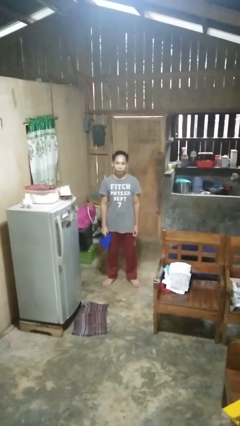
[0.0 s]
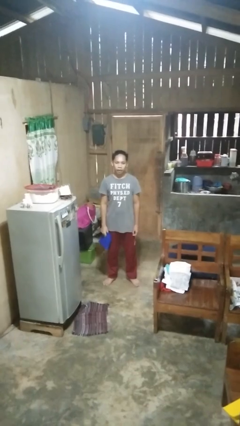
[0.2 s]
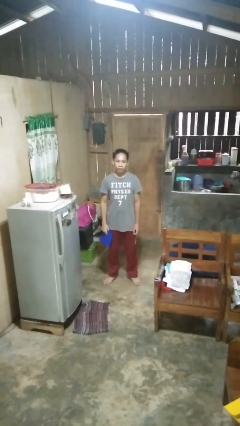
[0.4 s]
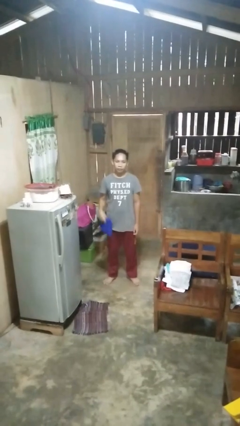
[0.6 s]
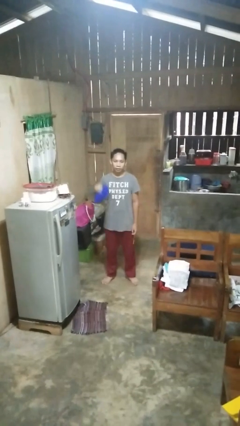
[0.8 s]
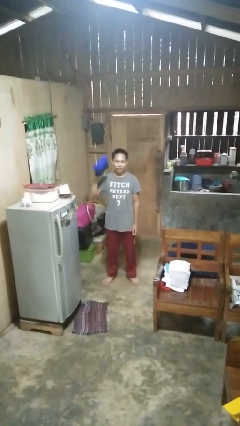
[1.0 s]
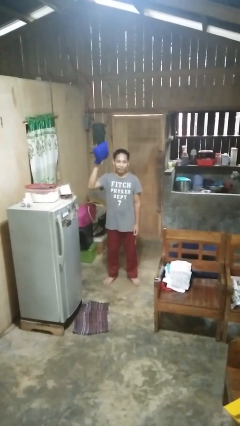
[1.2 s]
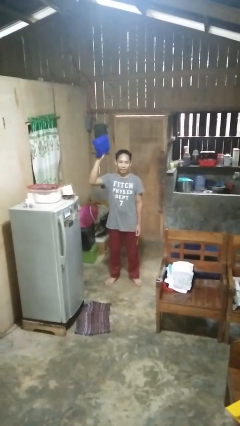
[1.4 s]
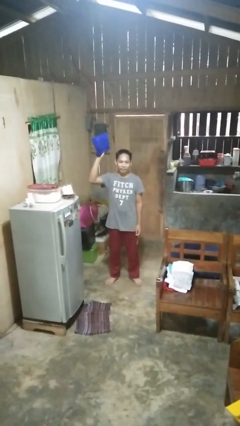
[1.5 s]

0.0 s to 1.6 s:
person holds object above head

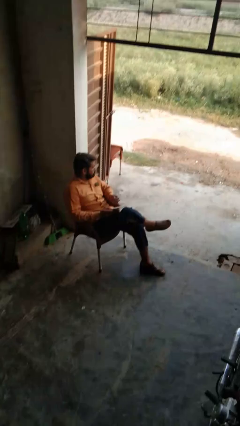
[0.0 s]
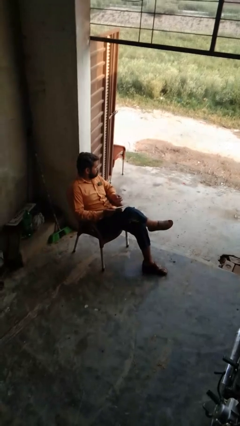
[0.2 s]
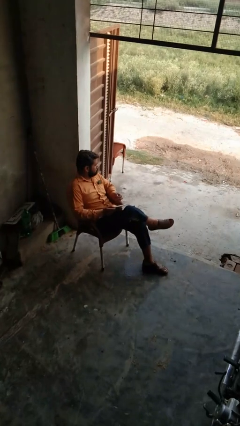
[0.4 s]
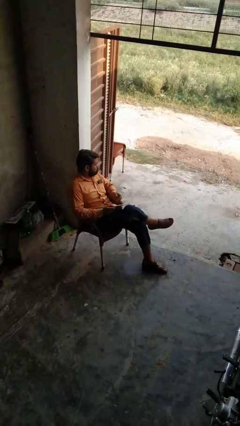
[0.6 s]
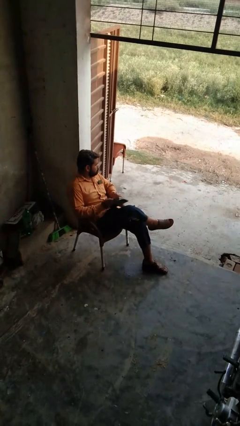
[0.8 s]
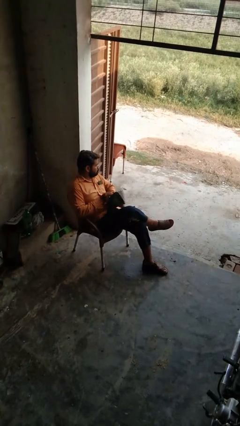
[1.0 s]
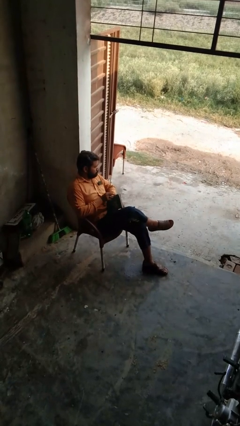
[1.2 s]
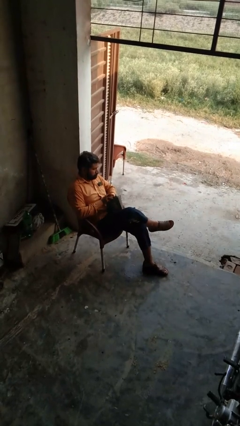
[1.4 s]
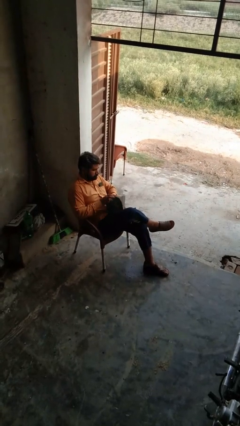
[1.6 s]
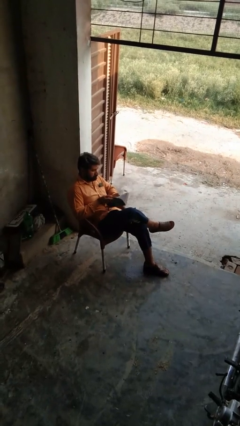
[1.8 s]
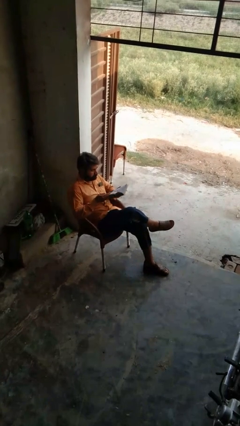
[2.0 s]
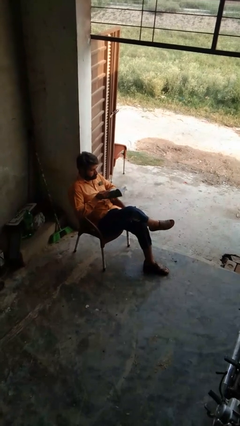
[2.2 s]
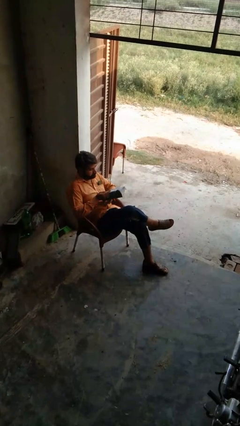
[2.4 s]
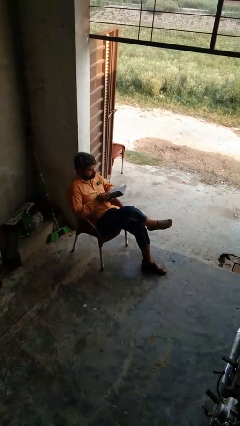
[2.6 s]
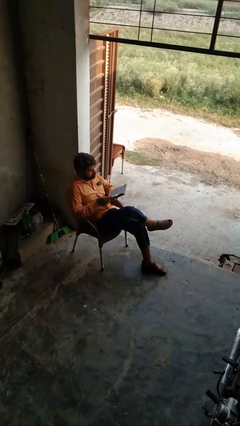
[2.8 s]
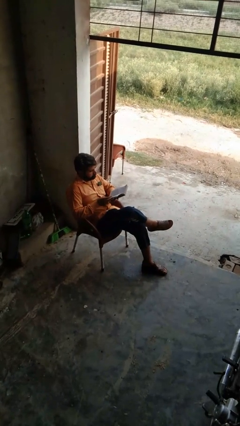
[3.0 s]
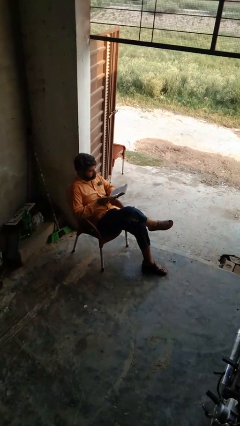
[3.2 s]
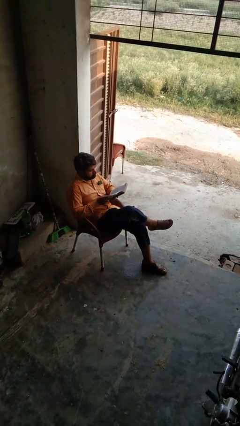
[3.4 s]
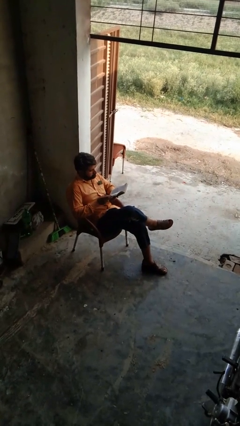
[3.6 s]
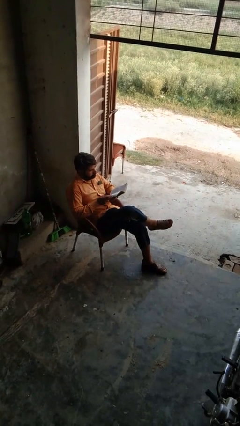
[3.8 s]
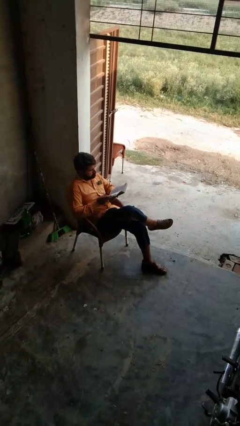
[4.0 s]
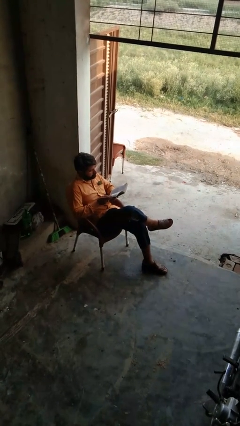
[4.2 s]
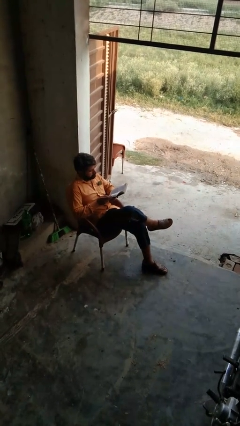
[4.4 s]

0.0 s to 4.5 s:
person reads book

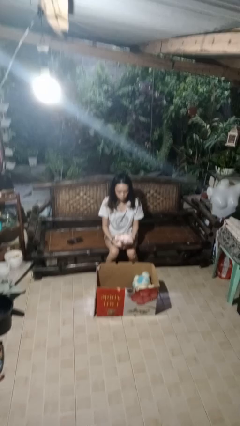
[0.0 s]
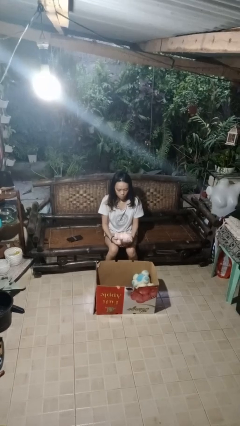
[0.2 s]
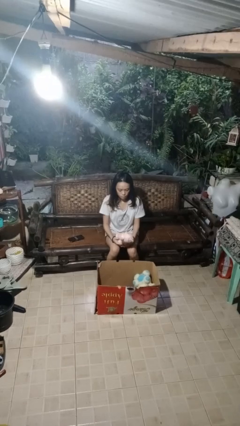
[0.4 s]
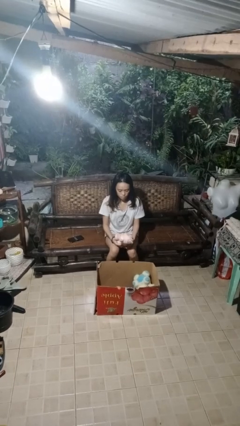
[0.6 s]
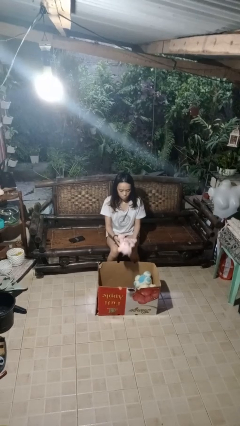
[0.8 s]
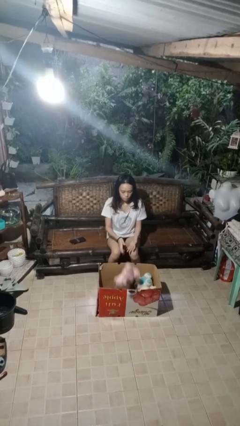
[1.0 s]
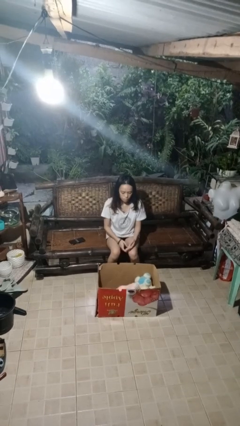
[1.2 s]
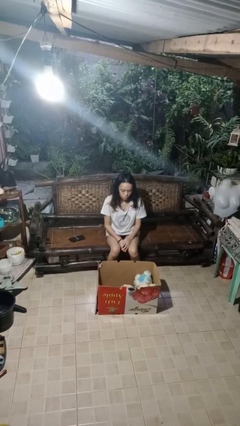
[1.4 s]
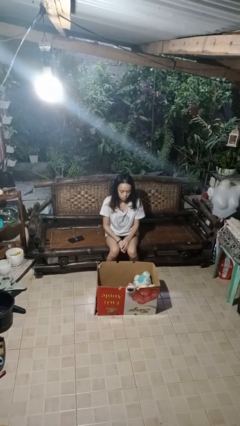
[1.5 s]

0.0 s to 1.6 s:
person puts object into box

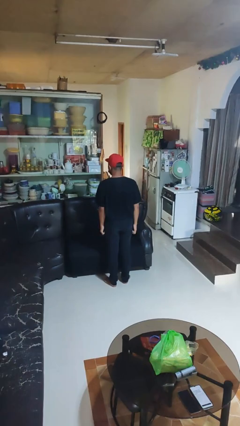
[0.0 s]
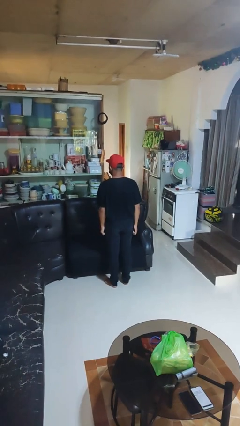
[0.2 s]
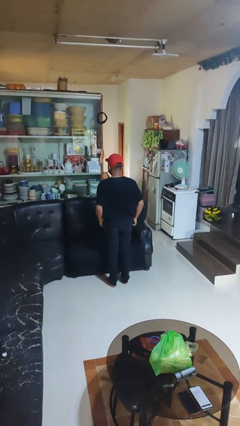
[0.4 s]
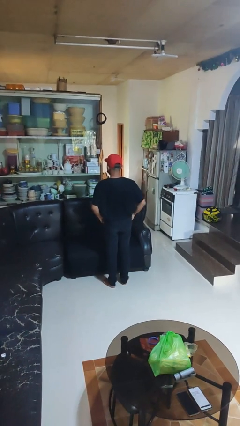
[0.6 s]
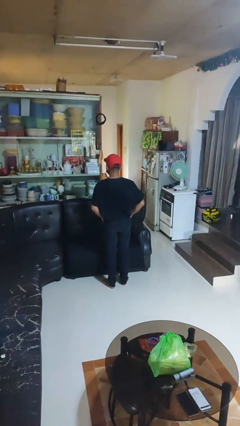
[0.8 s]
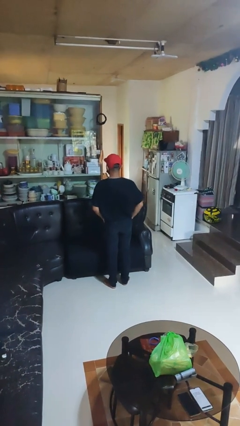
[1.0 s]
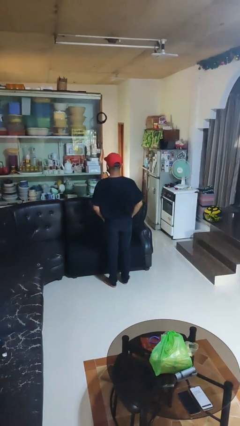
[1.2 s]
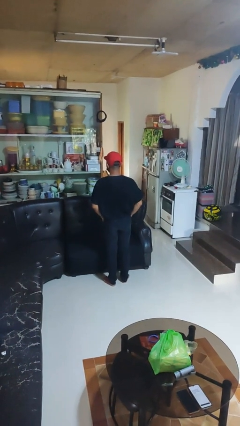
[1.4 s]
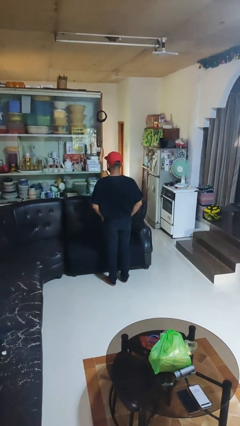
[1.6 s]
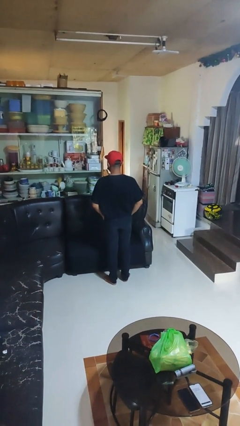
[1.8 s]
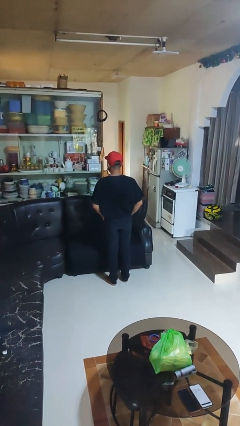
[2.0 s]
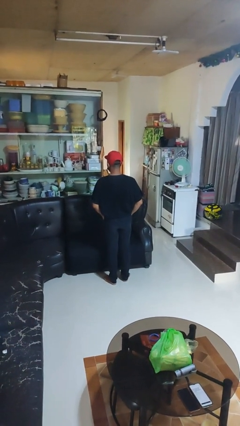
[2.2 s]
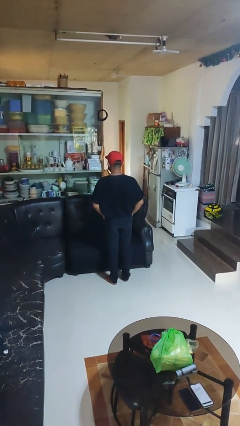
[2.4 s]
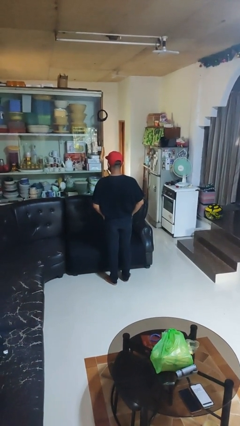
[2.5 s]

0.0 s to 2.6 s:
person puts hands in back pockets

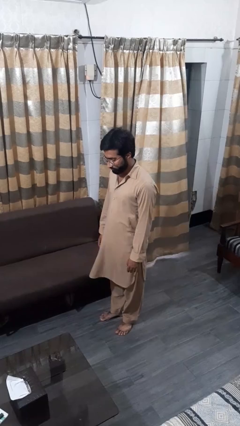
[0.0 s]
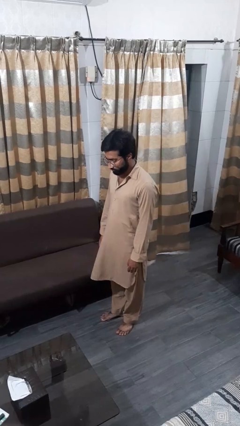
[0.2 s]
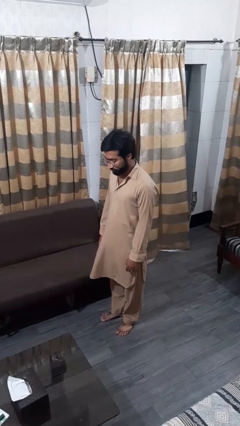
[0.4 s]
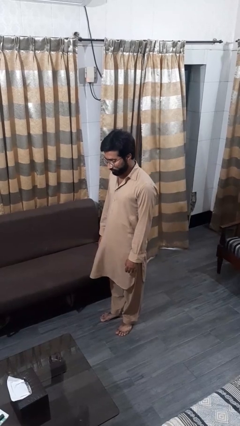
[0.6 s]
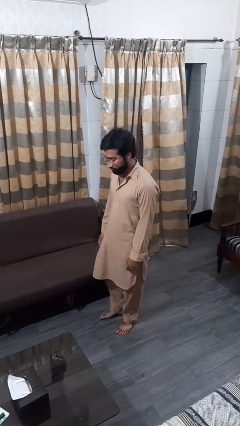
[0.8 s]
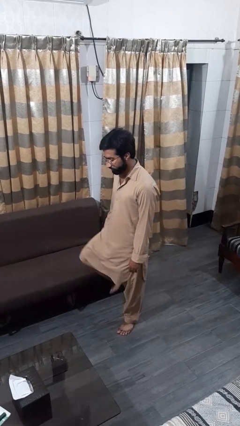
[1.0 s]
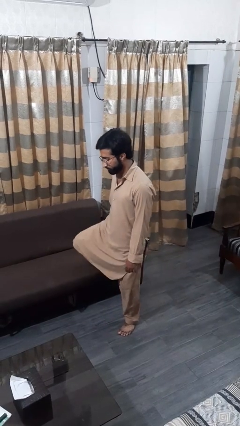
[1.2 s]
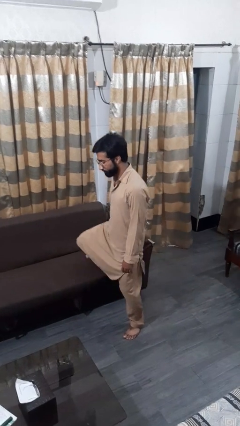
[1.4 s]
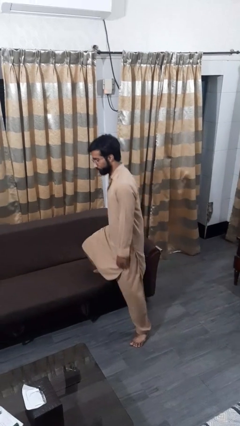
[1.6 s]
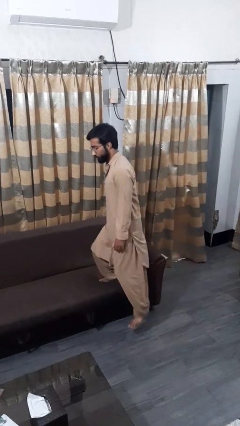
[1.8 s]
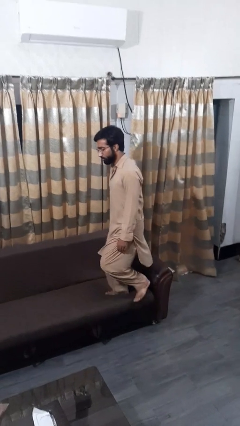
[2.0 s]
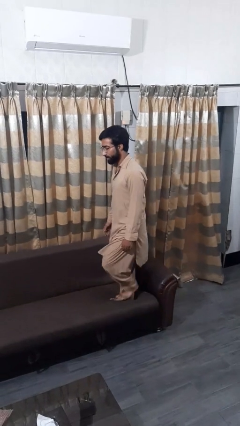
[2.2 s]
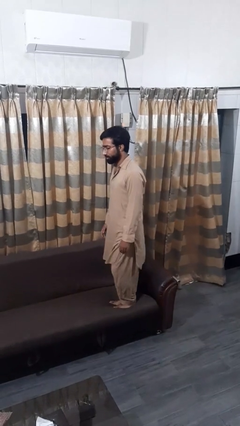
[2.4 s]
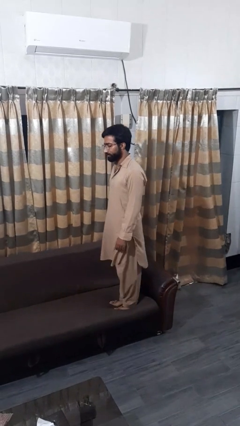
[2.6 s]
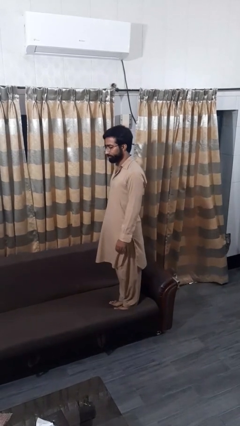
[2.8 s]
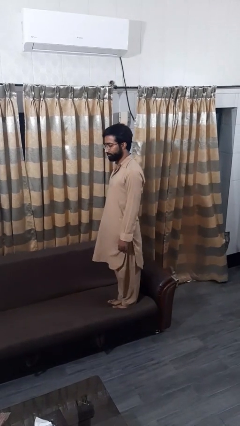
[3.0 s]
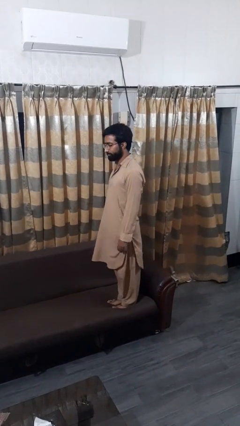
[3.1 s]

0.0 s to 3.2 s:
person climbs on couch

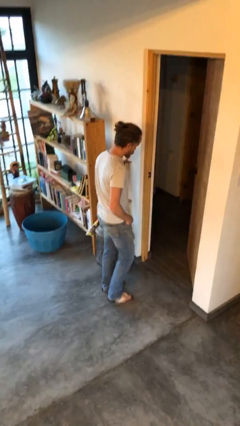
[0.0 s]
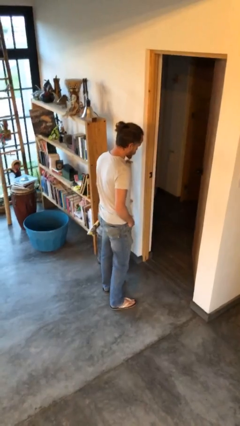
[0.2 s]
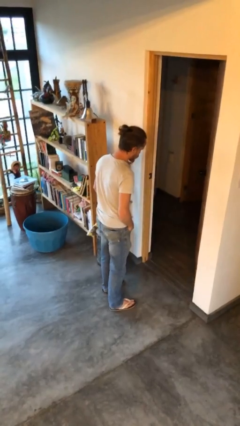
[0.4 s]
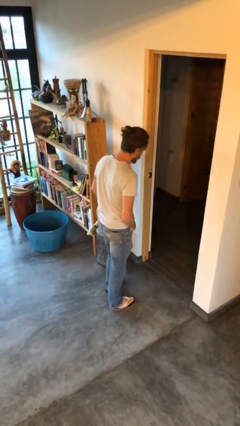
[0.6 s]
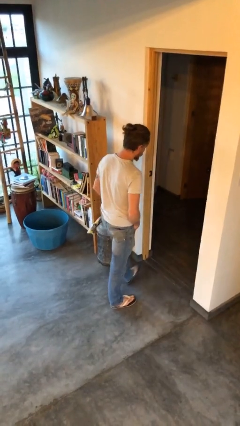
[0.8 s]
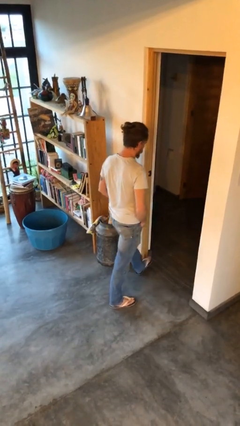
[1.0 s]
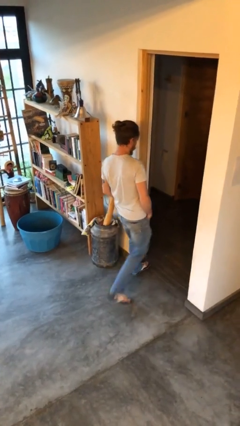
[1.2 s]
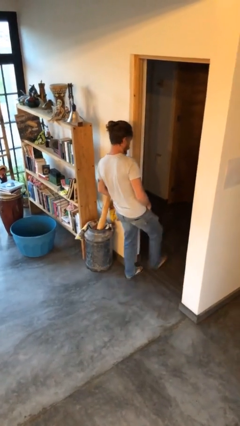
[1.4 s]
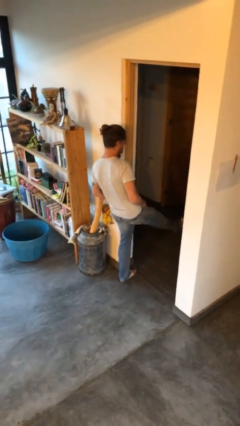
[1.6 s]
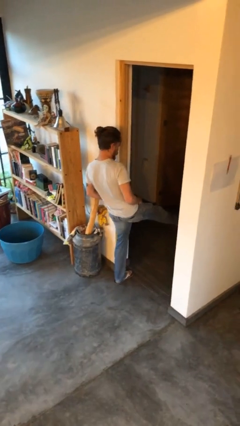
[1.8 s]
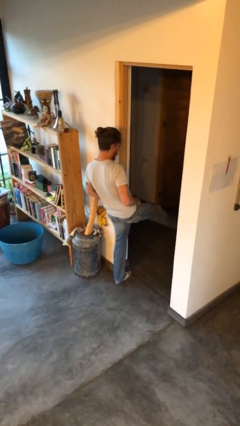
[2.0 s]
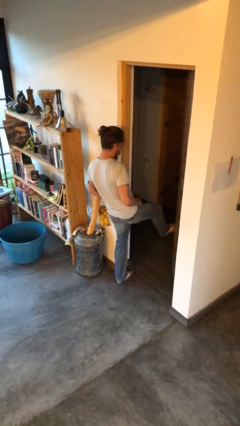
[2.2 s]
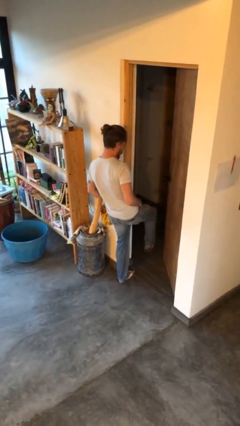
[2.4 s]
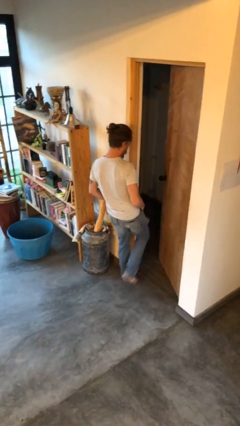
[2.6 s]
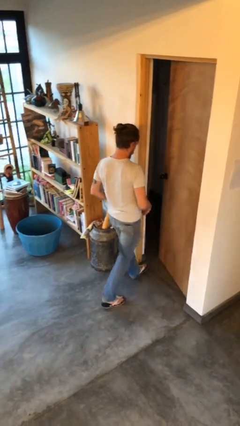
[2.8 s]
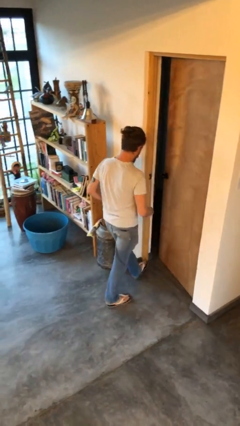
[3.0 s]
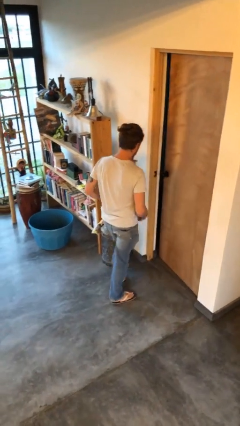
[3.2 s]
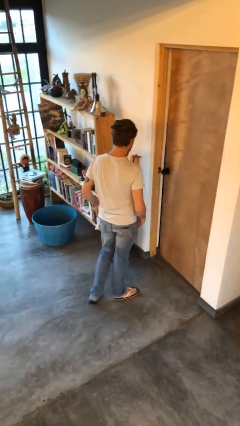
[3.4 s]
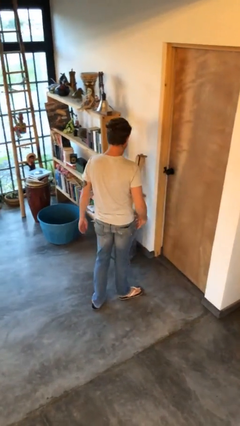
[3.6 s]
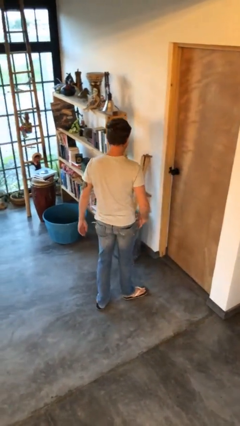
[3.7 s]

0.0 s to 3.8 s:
person closes door with foot

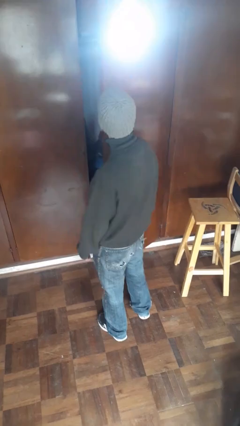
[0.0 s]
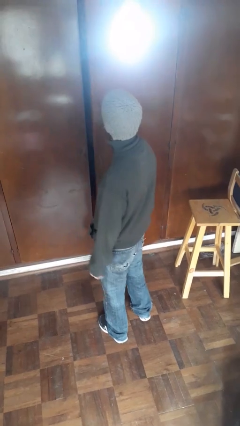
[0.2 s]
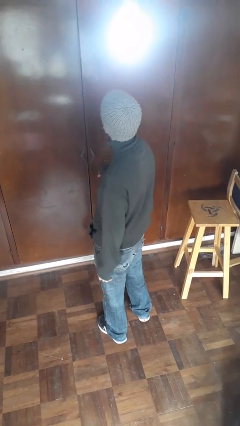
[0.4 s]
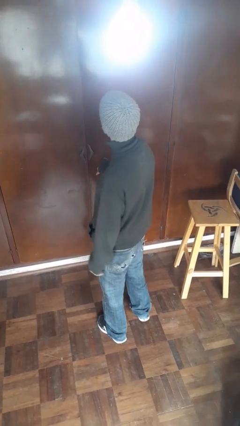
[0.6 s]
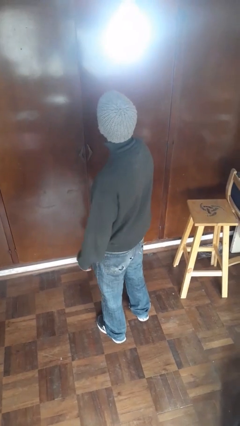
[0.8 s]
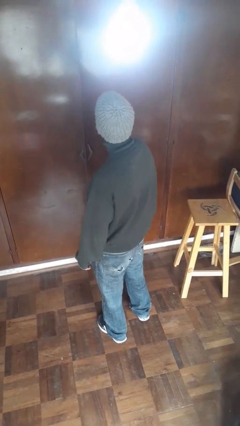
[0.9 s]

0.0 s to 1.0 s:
person closes closet door
